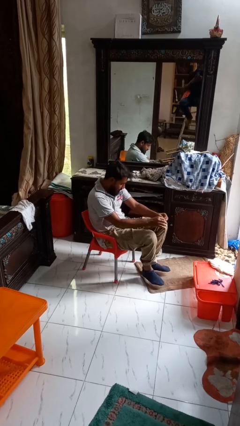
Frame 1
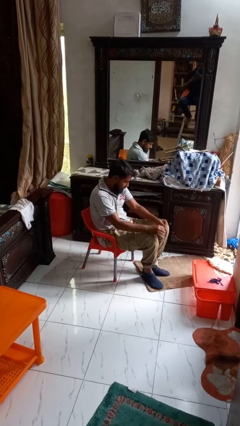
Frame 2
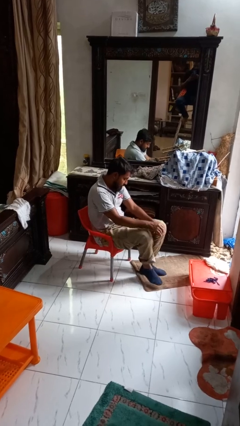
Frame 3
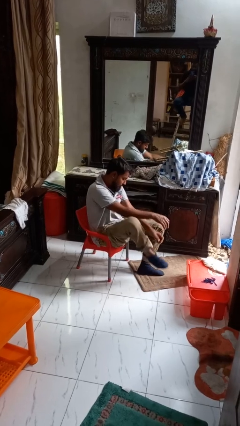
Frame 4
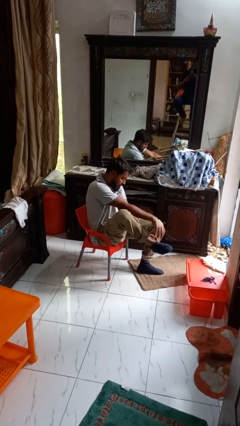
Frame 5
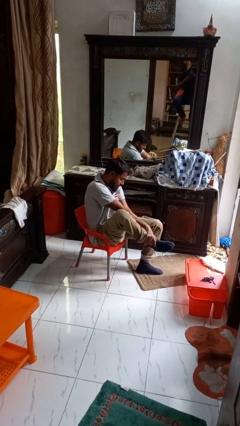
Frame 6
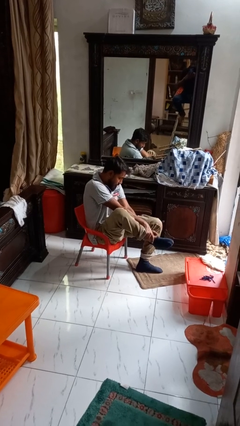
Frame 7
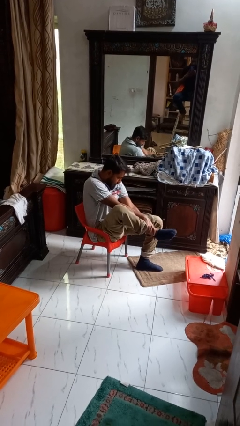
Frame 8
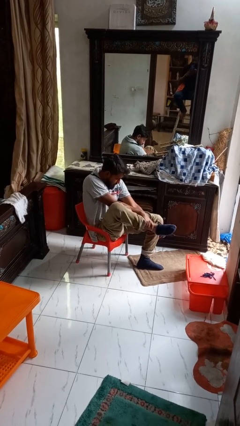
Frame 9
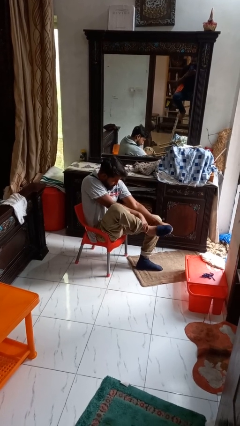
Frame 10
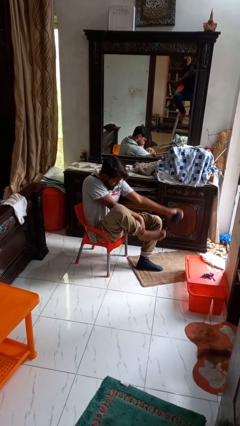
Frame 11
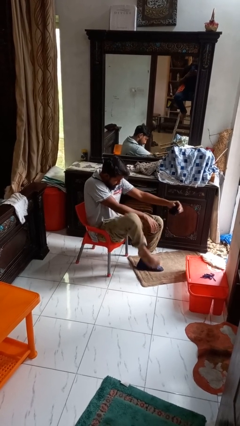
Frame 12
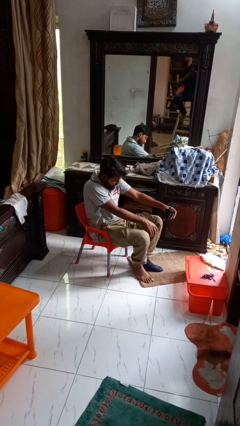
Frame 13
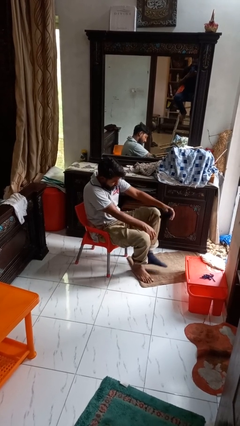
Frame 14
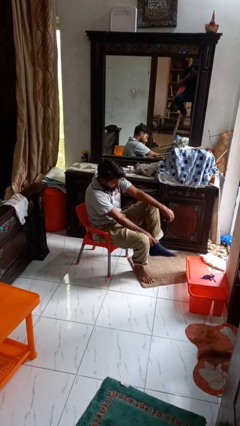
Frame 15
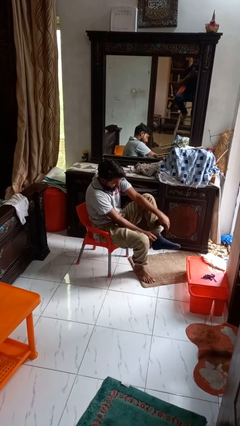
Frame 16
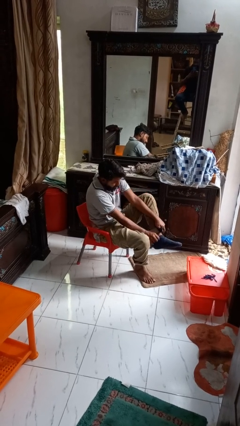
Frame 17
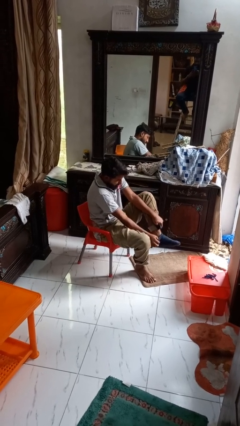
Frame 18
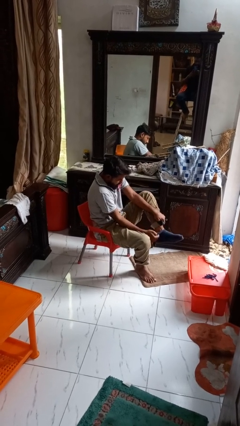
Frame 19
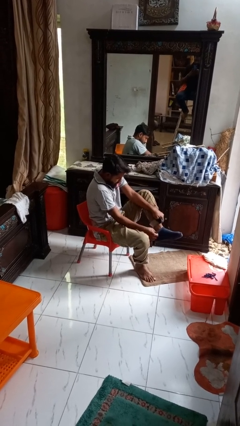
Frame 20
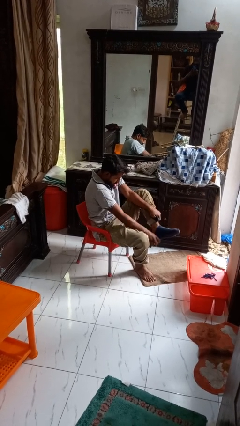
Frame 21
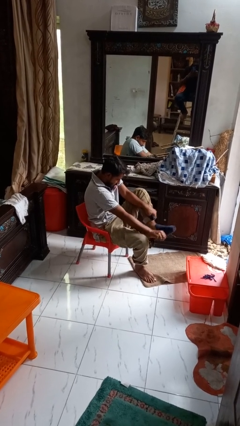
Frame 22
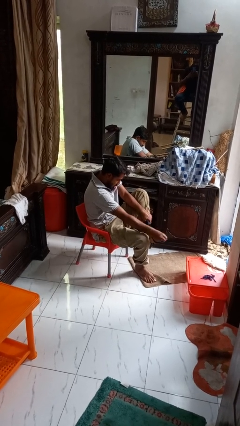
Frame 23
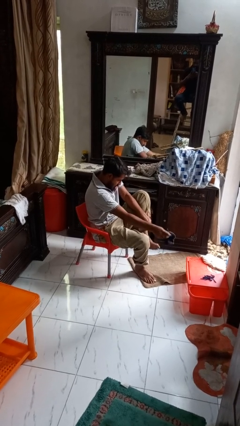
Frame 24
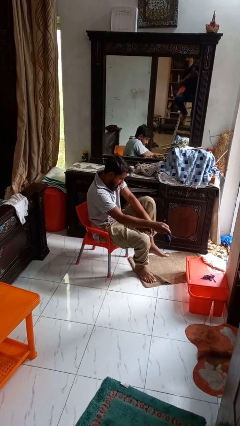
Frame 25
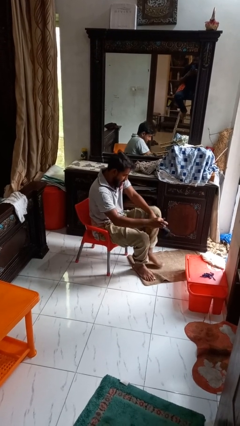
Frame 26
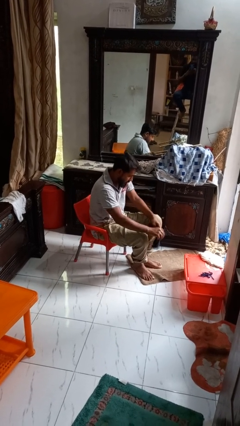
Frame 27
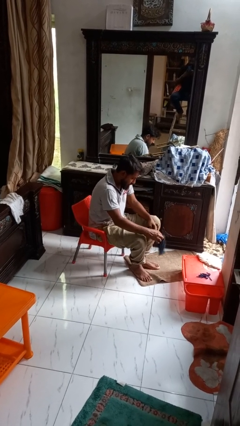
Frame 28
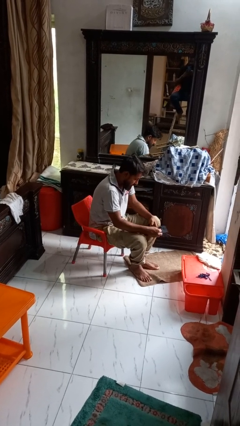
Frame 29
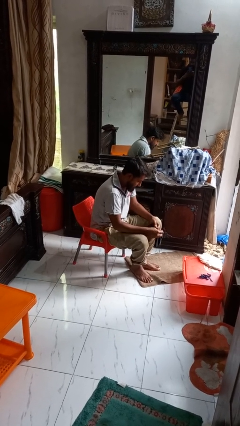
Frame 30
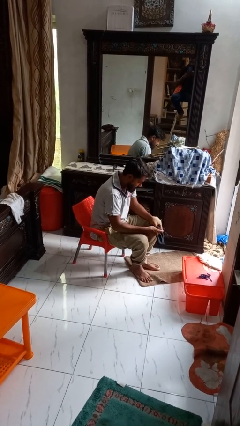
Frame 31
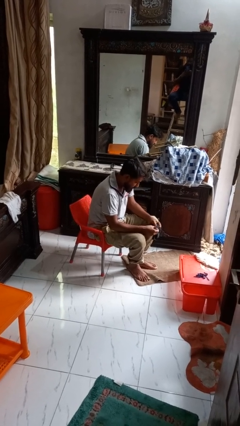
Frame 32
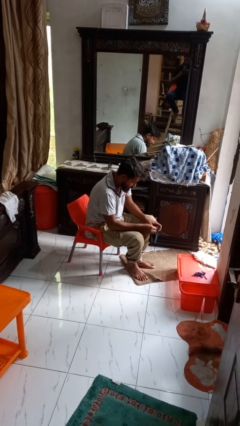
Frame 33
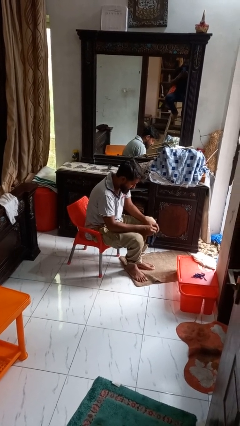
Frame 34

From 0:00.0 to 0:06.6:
person takes off socks

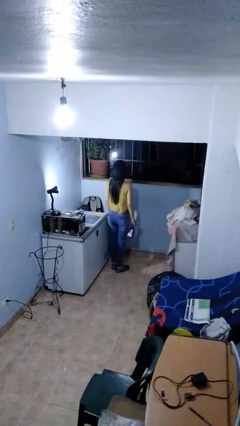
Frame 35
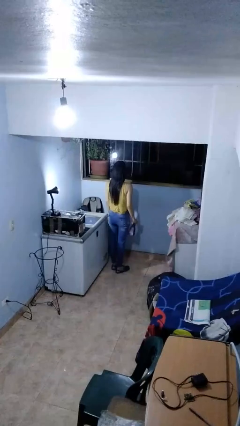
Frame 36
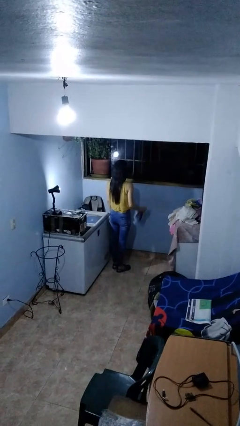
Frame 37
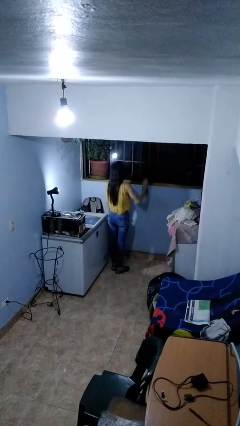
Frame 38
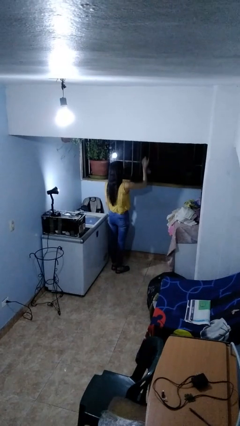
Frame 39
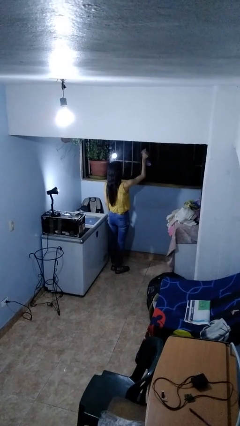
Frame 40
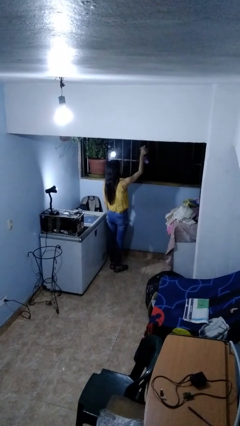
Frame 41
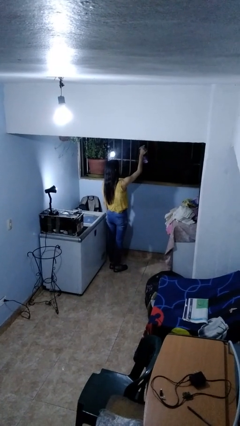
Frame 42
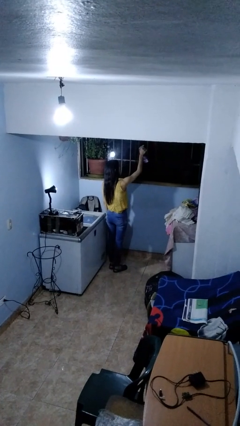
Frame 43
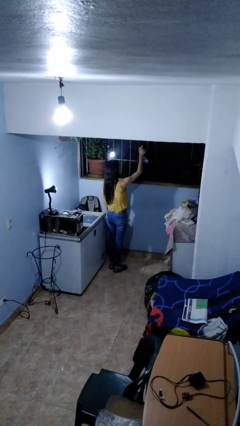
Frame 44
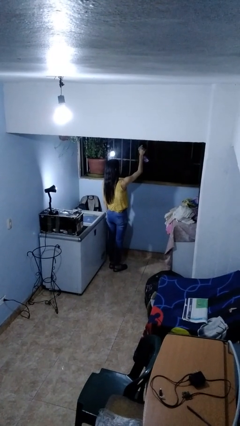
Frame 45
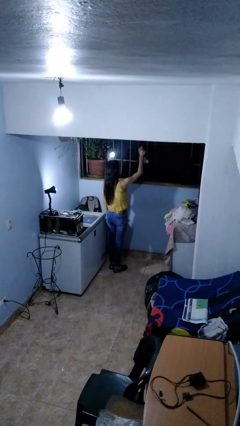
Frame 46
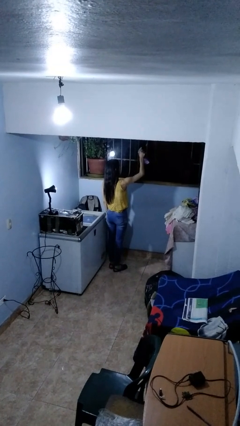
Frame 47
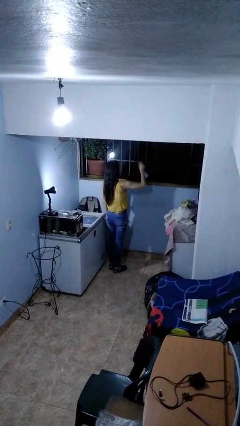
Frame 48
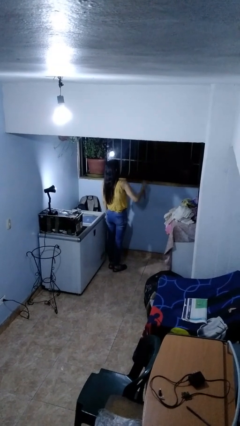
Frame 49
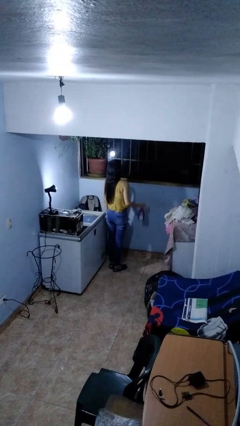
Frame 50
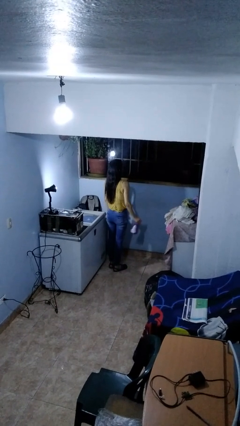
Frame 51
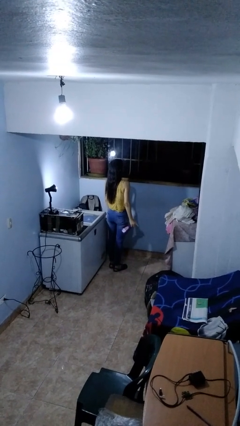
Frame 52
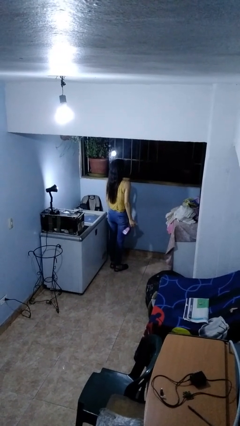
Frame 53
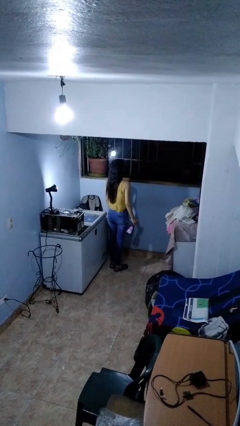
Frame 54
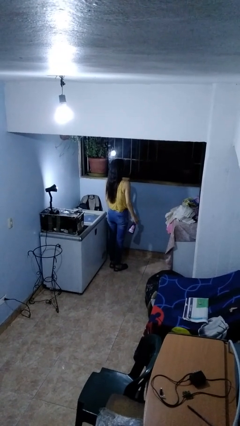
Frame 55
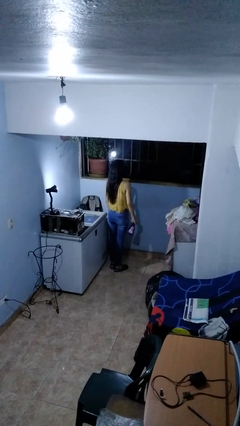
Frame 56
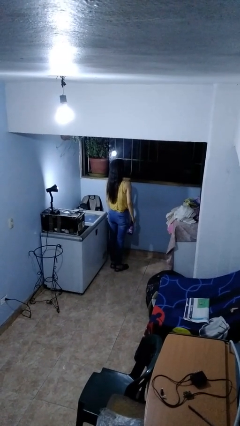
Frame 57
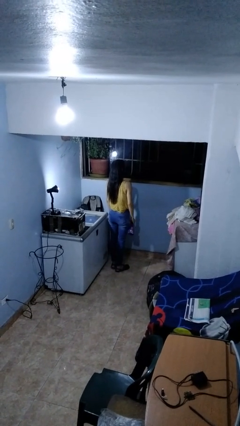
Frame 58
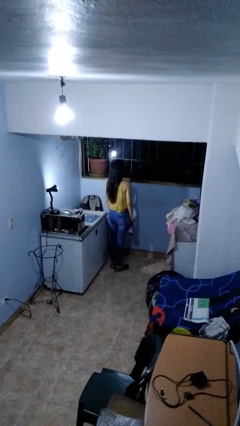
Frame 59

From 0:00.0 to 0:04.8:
person sprays from bottle

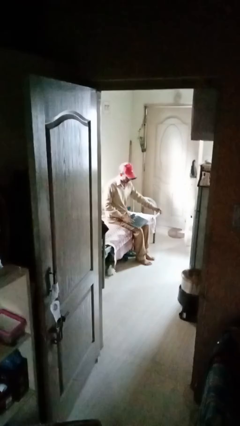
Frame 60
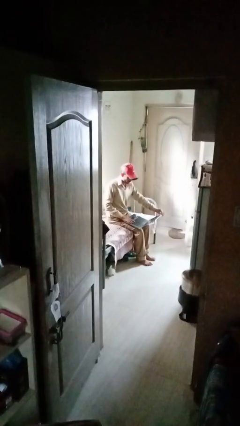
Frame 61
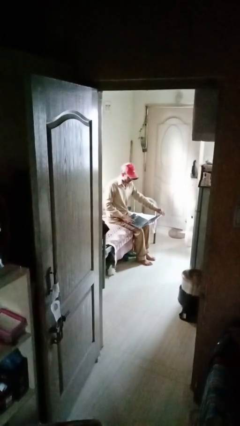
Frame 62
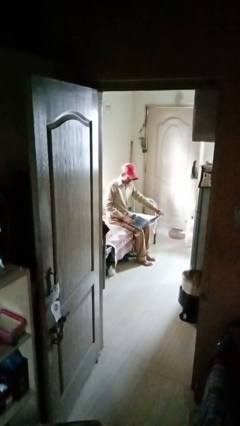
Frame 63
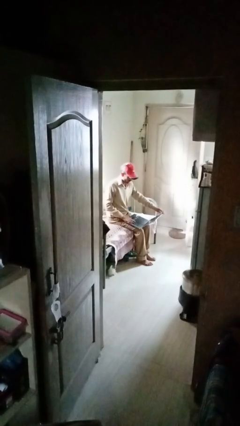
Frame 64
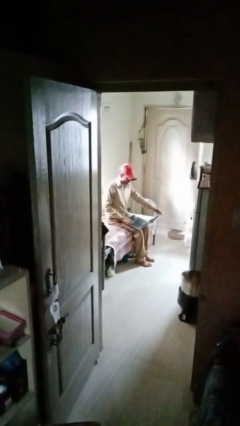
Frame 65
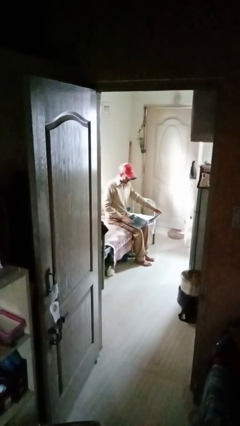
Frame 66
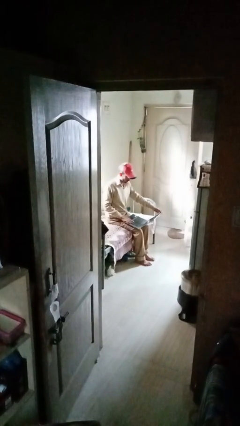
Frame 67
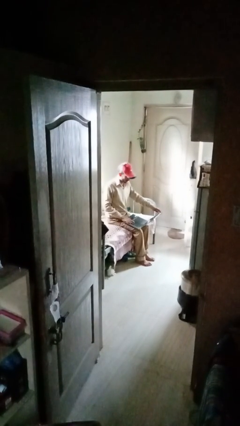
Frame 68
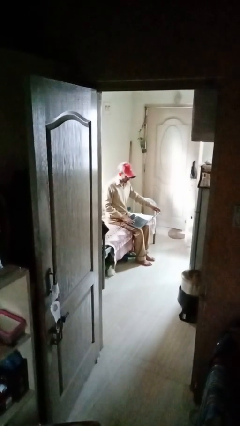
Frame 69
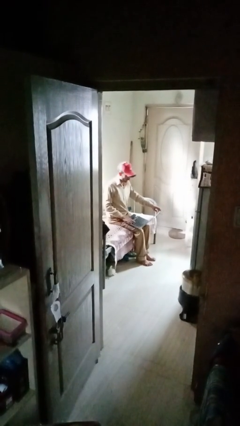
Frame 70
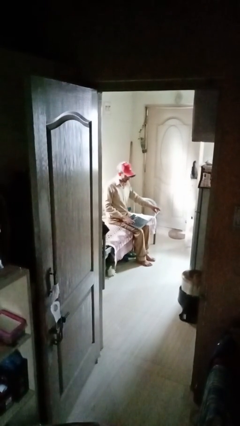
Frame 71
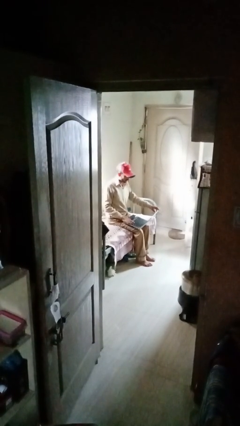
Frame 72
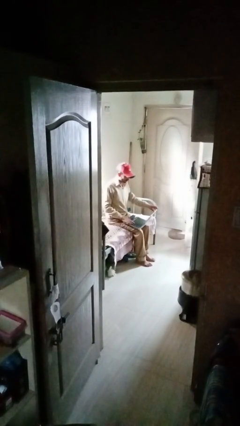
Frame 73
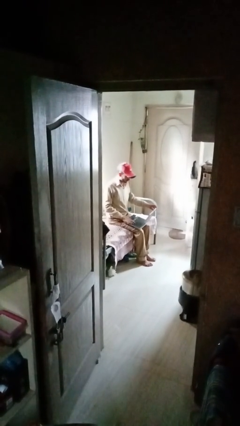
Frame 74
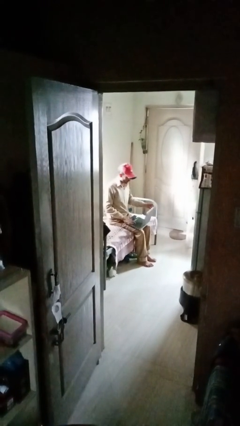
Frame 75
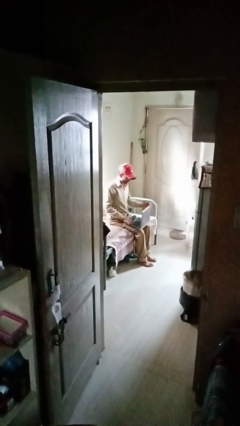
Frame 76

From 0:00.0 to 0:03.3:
person opens laptop

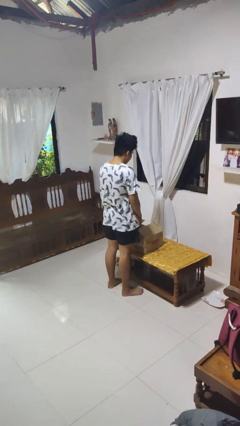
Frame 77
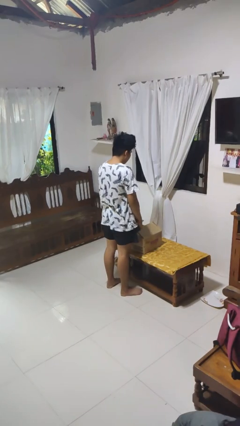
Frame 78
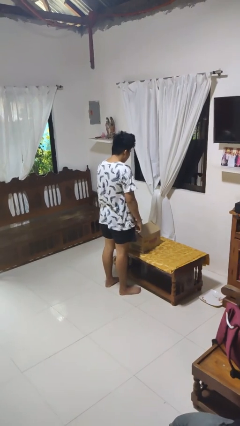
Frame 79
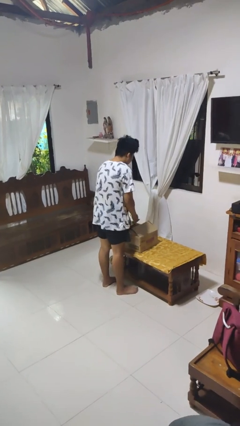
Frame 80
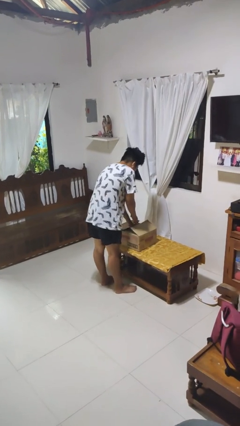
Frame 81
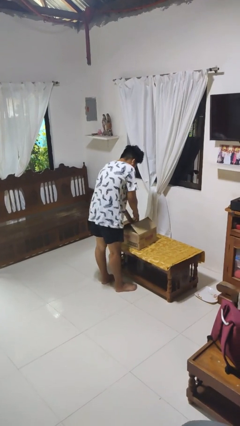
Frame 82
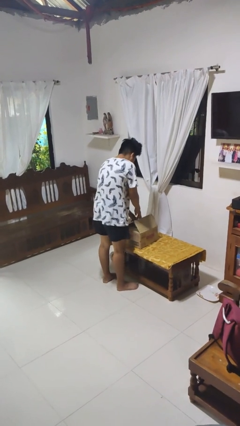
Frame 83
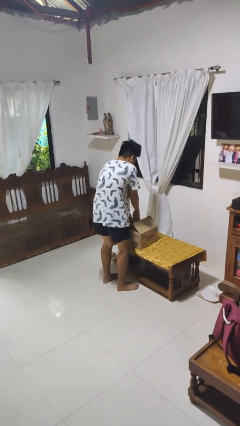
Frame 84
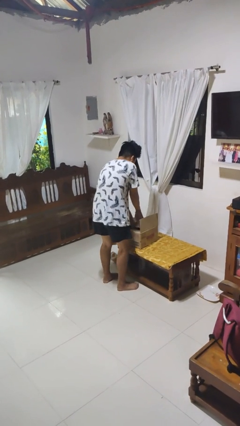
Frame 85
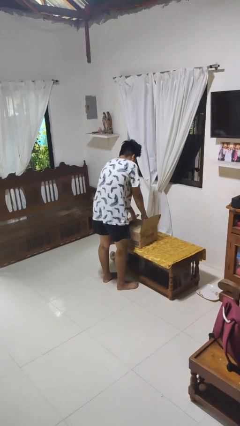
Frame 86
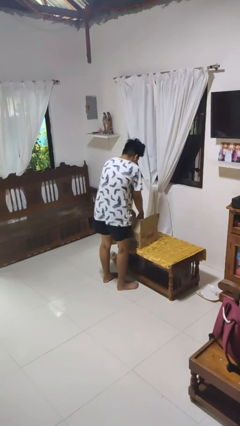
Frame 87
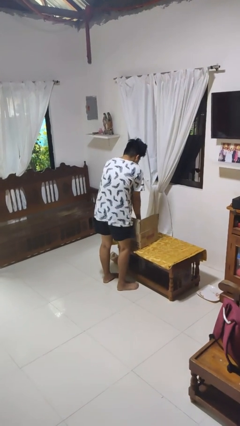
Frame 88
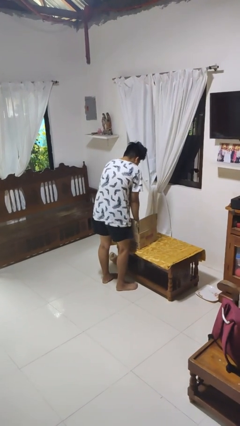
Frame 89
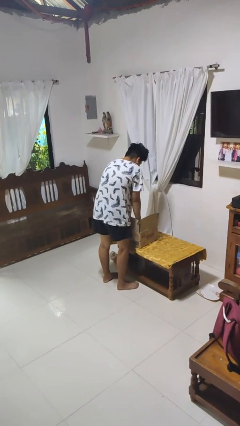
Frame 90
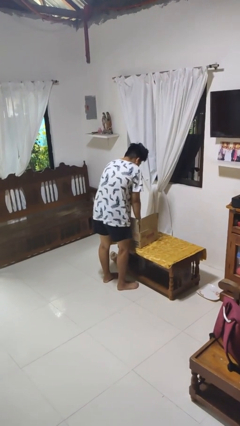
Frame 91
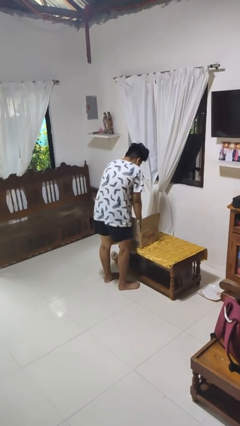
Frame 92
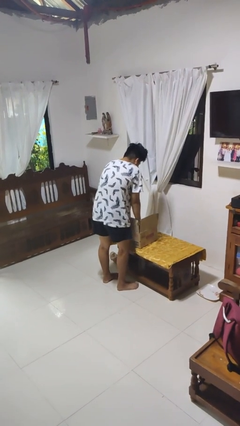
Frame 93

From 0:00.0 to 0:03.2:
person searches in box

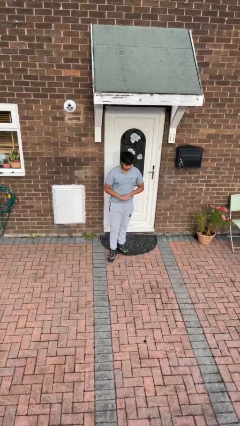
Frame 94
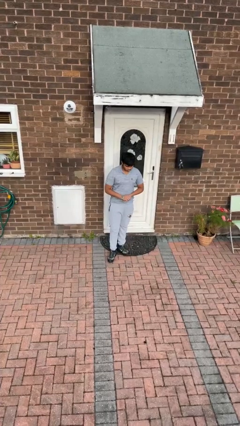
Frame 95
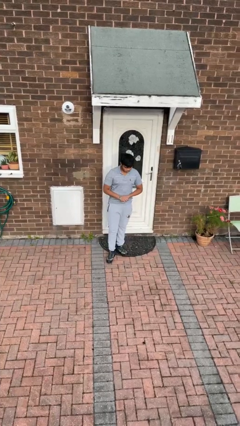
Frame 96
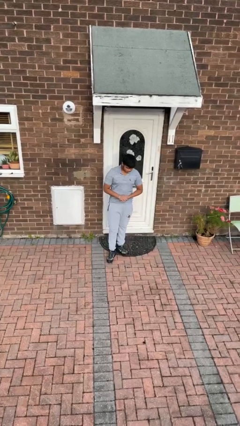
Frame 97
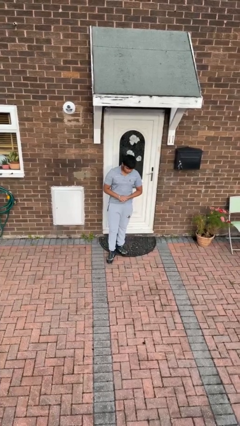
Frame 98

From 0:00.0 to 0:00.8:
person stands up from floor
